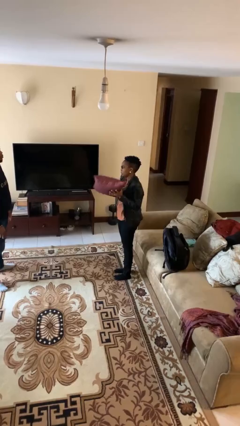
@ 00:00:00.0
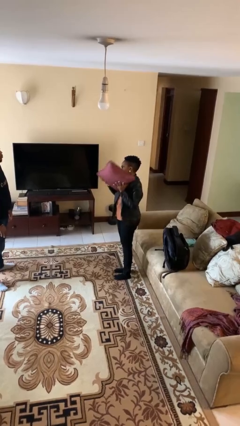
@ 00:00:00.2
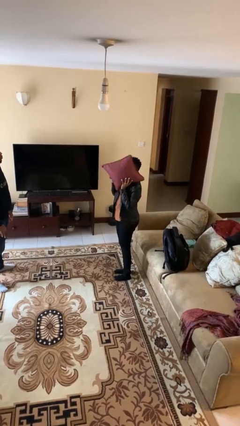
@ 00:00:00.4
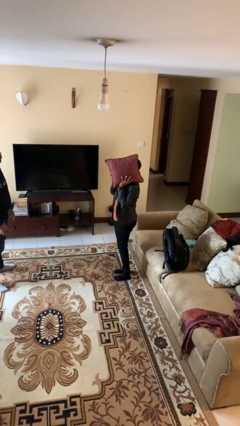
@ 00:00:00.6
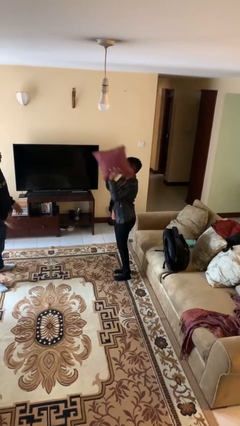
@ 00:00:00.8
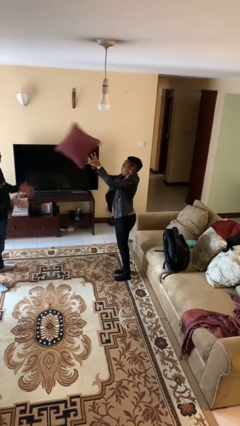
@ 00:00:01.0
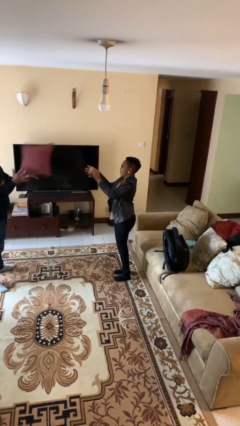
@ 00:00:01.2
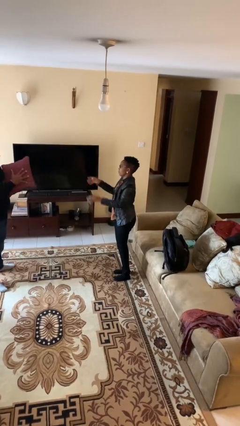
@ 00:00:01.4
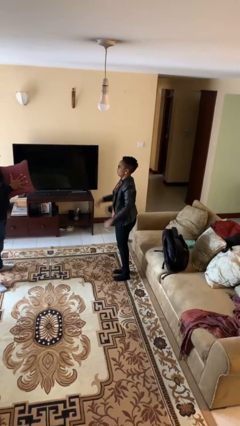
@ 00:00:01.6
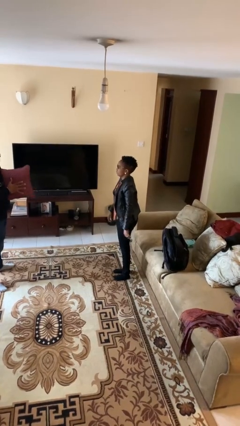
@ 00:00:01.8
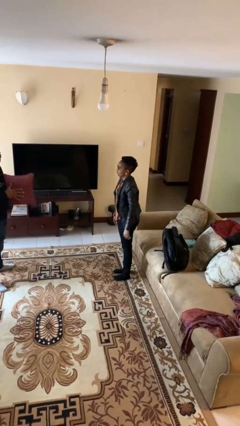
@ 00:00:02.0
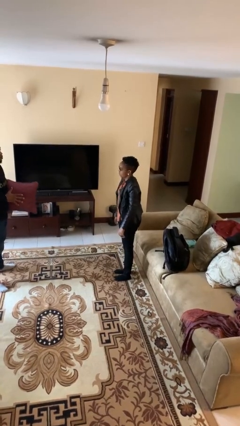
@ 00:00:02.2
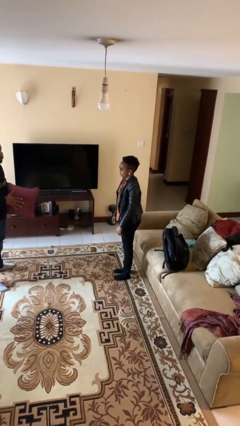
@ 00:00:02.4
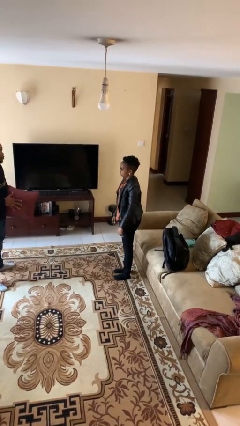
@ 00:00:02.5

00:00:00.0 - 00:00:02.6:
person throws object to person

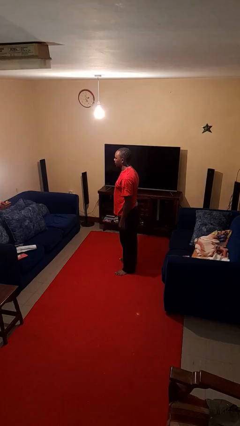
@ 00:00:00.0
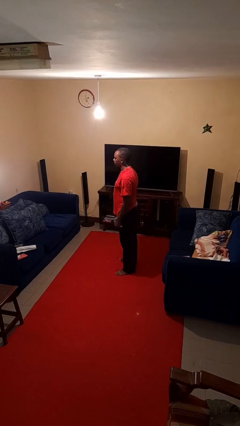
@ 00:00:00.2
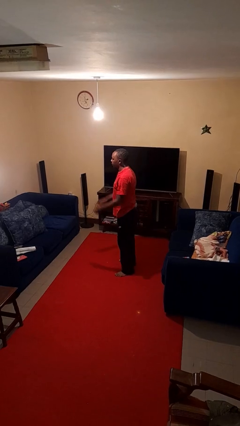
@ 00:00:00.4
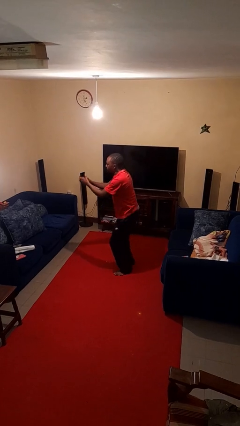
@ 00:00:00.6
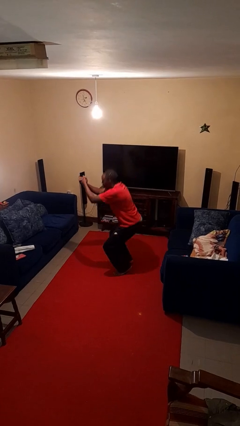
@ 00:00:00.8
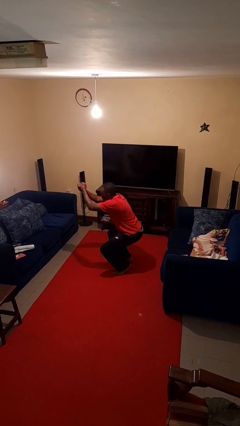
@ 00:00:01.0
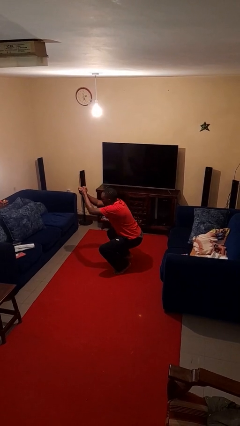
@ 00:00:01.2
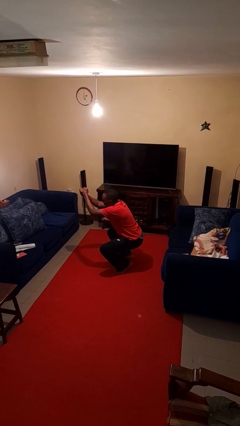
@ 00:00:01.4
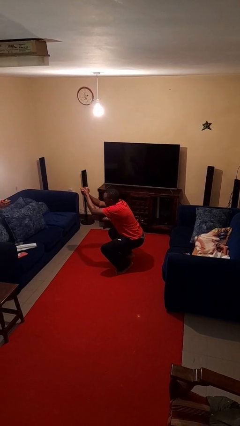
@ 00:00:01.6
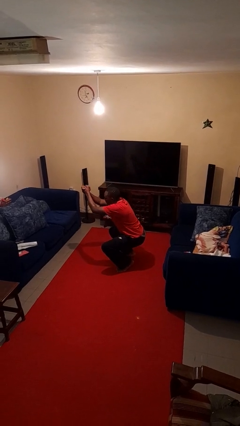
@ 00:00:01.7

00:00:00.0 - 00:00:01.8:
person squats

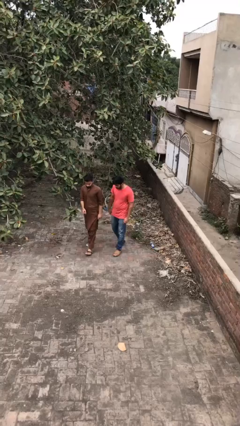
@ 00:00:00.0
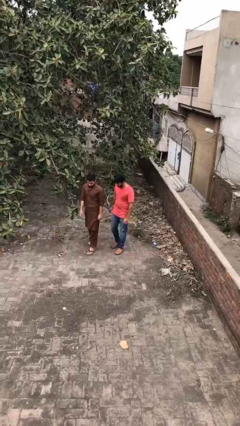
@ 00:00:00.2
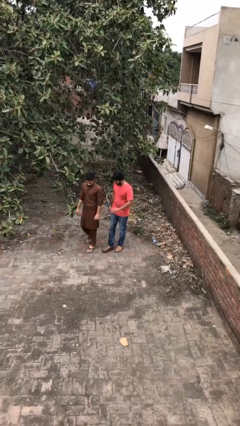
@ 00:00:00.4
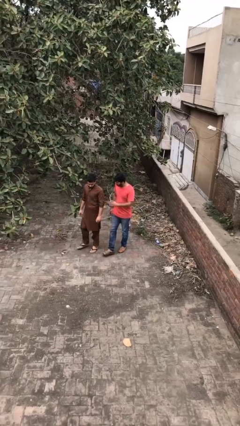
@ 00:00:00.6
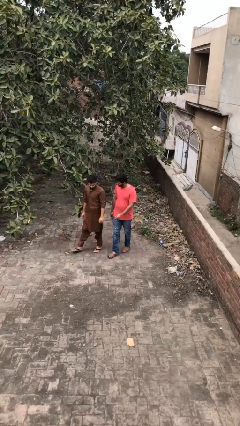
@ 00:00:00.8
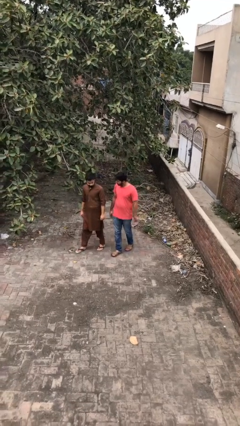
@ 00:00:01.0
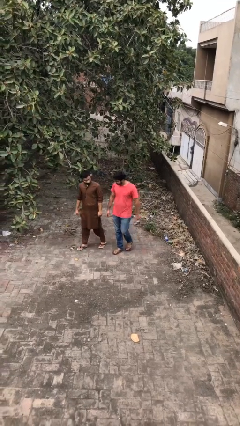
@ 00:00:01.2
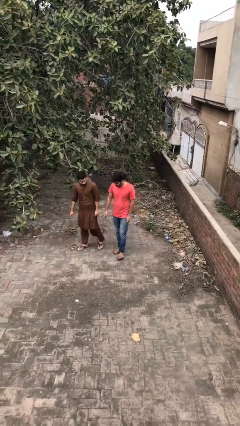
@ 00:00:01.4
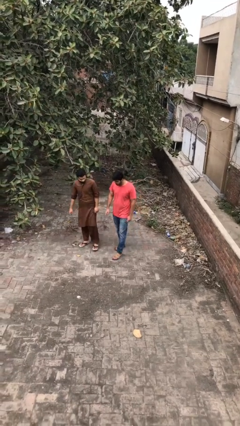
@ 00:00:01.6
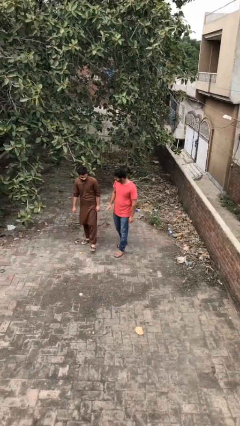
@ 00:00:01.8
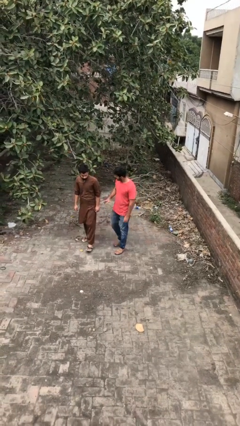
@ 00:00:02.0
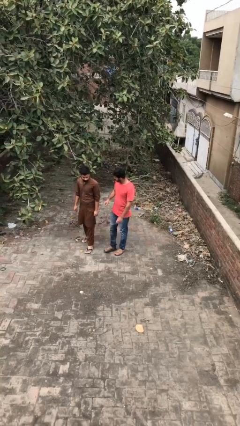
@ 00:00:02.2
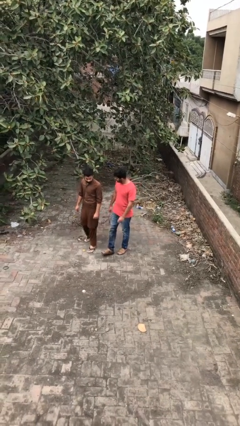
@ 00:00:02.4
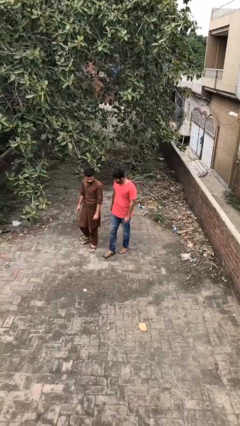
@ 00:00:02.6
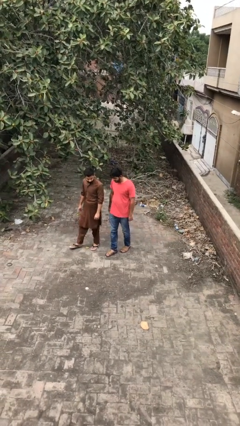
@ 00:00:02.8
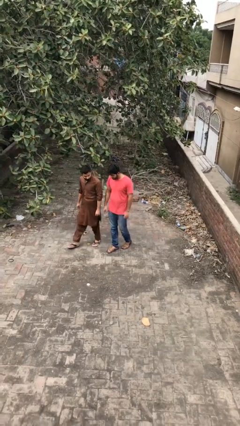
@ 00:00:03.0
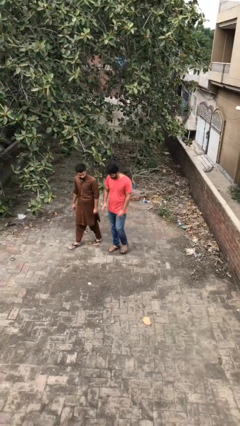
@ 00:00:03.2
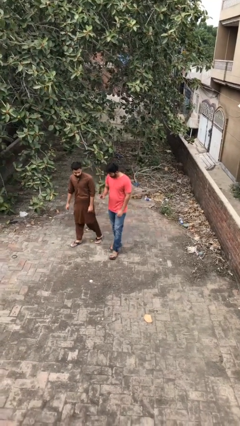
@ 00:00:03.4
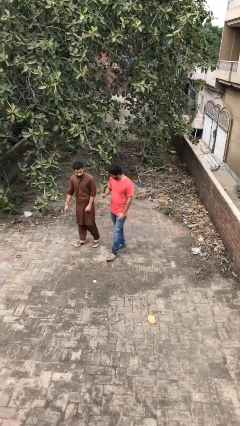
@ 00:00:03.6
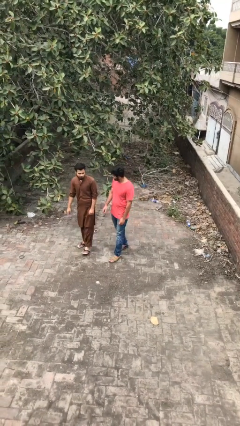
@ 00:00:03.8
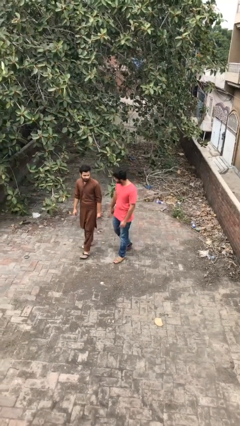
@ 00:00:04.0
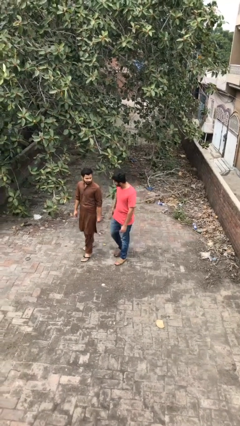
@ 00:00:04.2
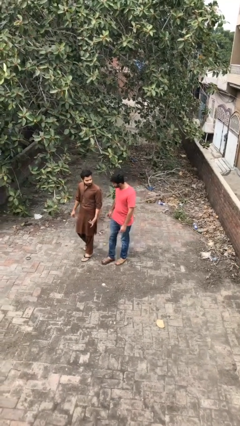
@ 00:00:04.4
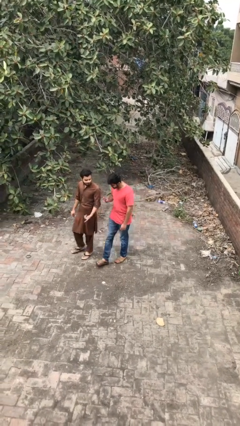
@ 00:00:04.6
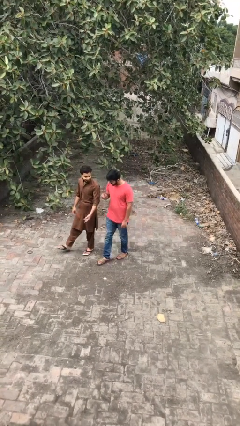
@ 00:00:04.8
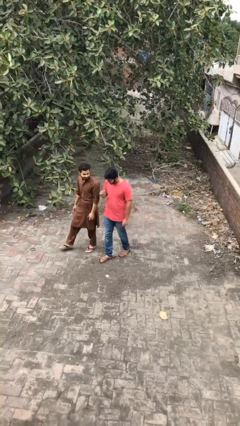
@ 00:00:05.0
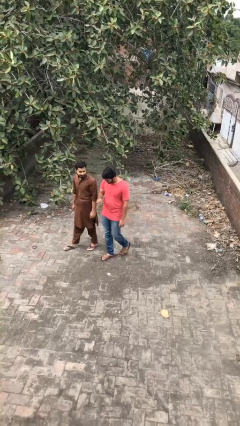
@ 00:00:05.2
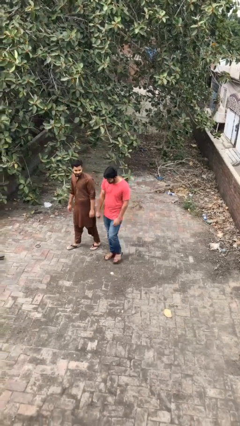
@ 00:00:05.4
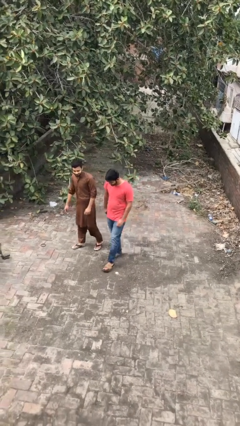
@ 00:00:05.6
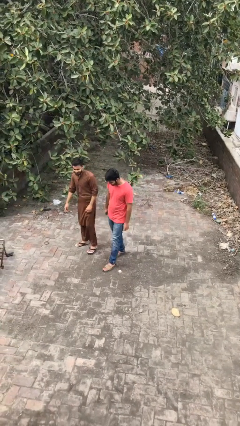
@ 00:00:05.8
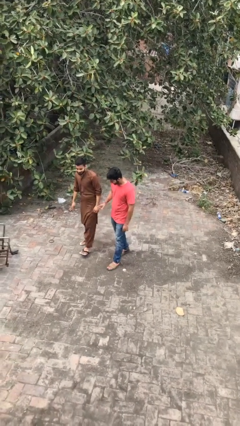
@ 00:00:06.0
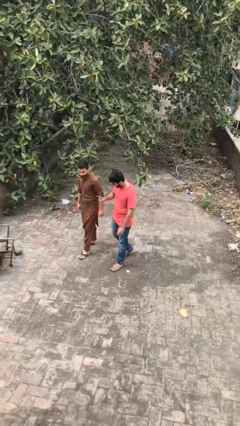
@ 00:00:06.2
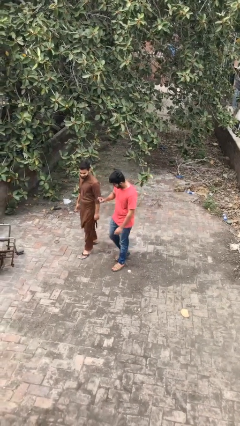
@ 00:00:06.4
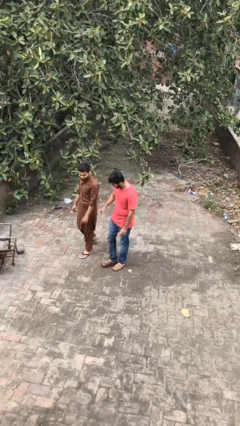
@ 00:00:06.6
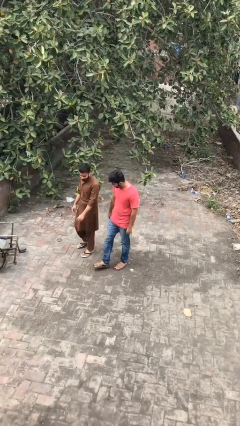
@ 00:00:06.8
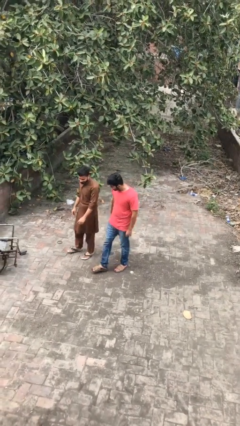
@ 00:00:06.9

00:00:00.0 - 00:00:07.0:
person talks to person

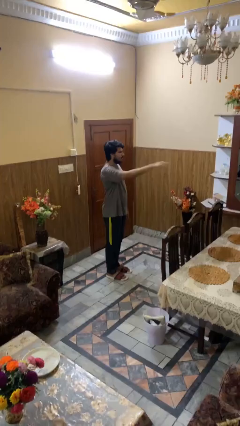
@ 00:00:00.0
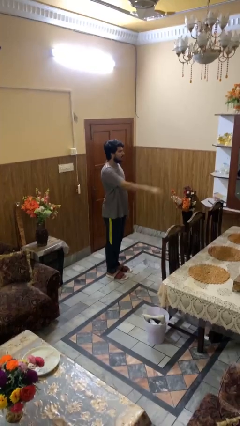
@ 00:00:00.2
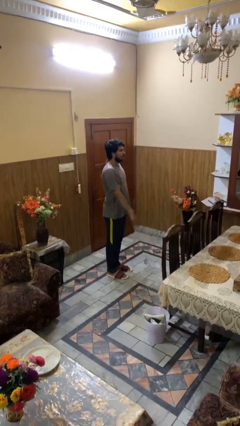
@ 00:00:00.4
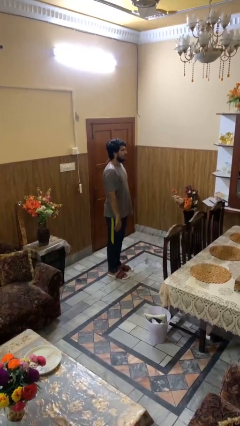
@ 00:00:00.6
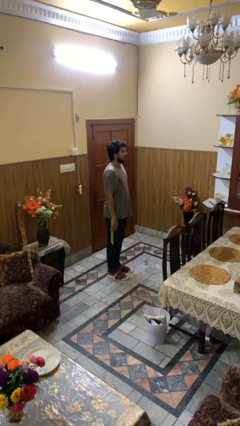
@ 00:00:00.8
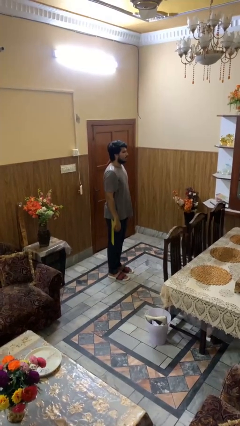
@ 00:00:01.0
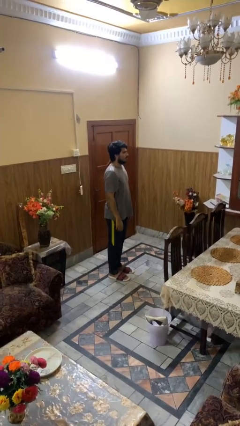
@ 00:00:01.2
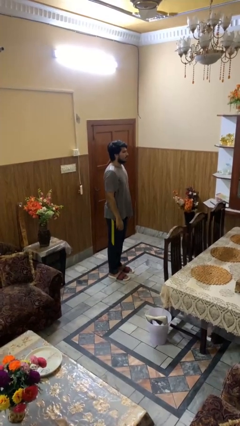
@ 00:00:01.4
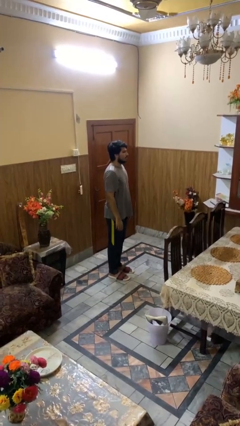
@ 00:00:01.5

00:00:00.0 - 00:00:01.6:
person gestures swipe down

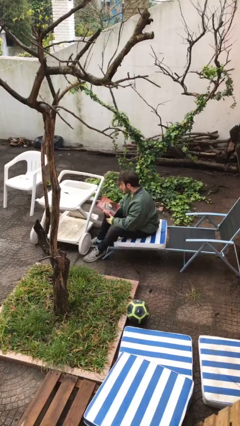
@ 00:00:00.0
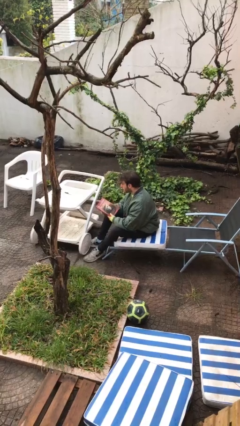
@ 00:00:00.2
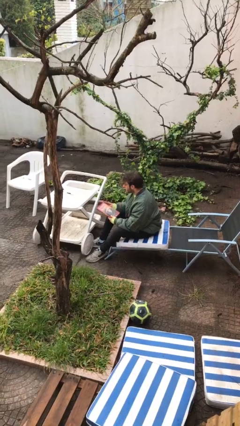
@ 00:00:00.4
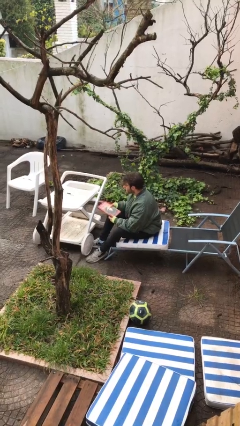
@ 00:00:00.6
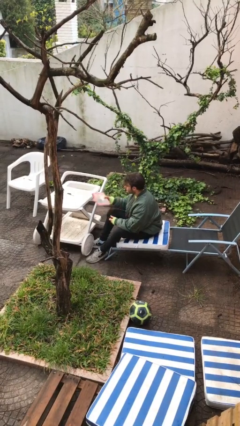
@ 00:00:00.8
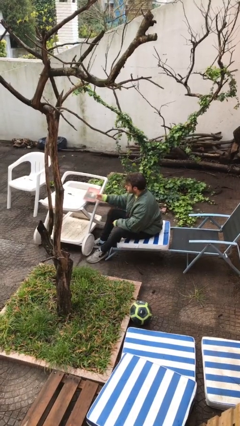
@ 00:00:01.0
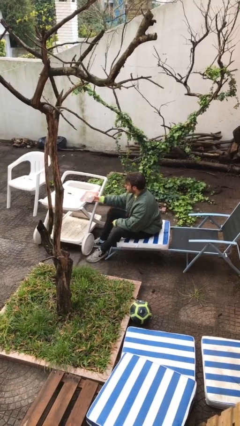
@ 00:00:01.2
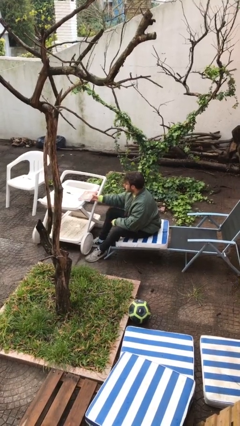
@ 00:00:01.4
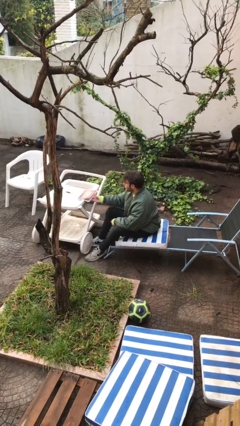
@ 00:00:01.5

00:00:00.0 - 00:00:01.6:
person puts down object on table

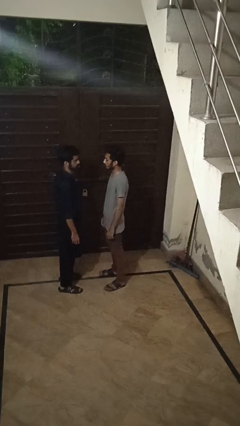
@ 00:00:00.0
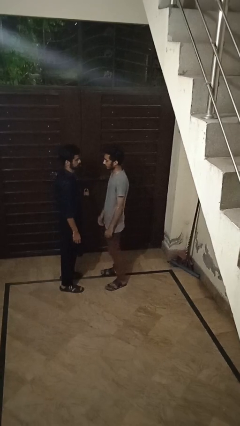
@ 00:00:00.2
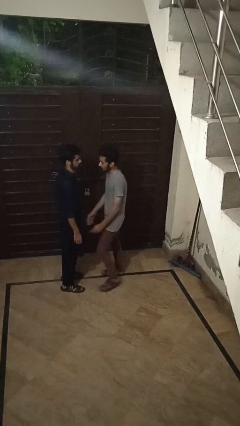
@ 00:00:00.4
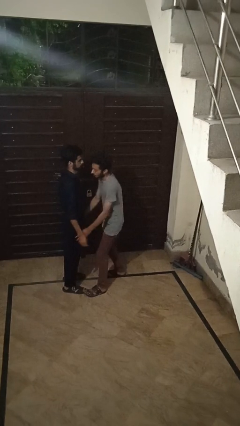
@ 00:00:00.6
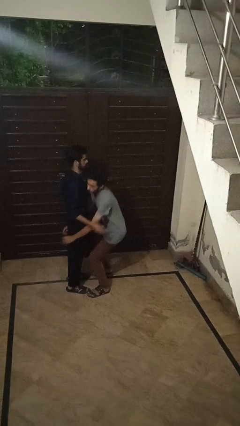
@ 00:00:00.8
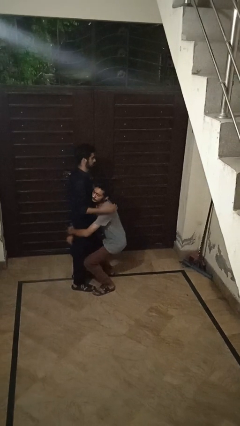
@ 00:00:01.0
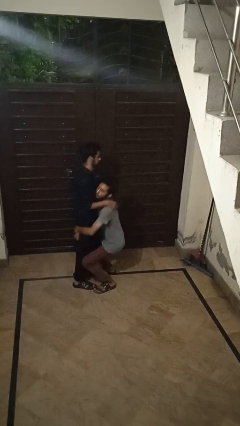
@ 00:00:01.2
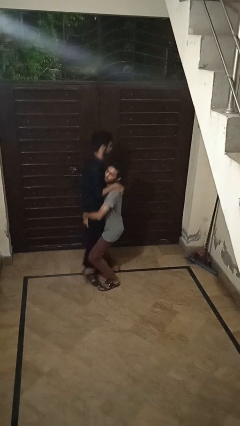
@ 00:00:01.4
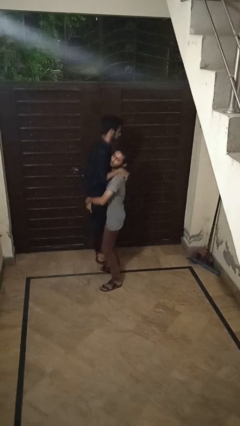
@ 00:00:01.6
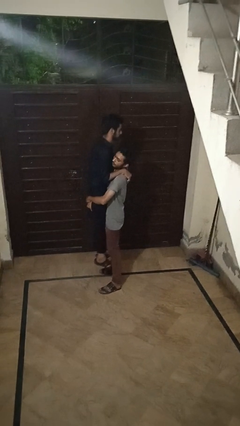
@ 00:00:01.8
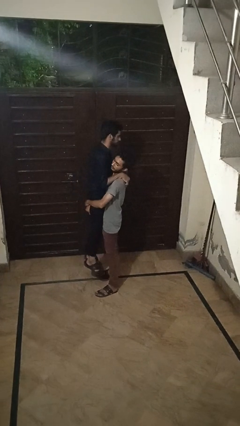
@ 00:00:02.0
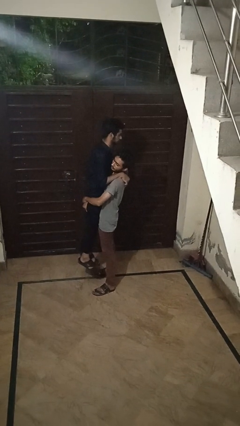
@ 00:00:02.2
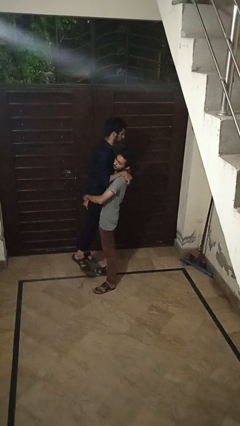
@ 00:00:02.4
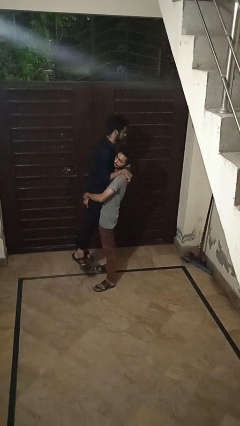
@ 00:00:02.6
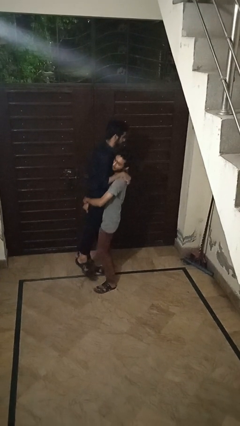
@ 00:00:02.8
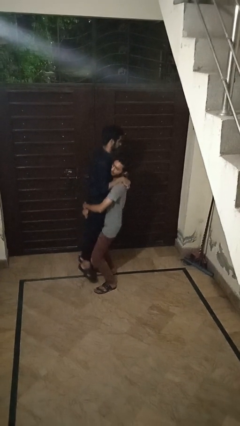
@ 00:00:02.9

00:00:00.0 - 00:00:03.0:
person picks up person
